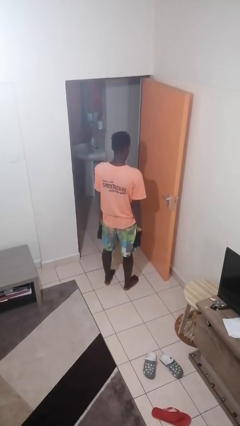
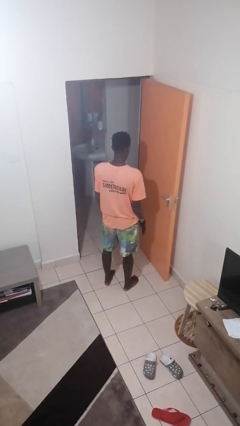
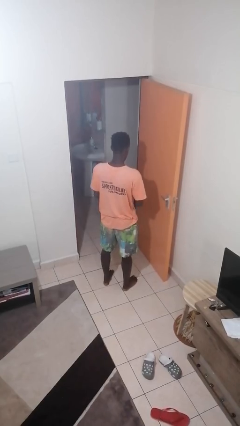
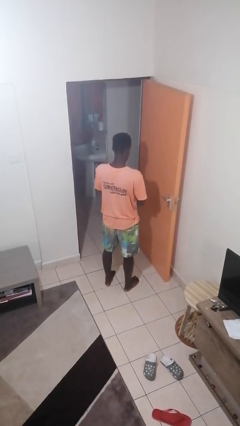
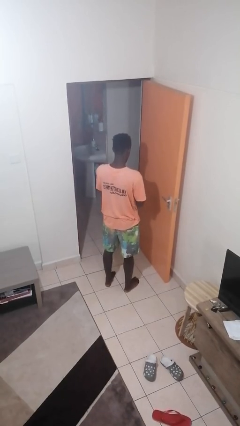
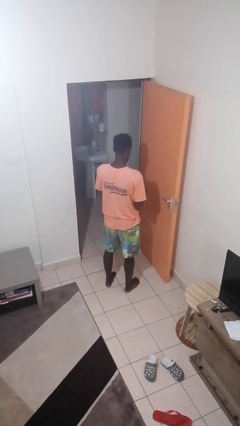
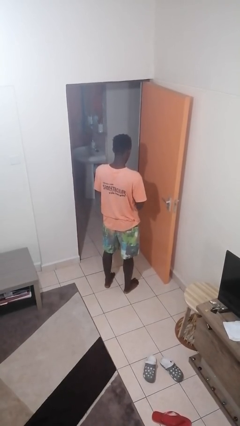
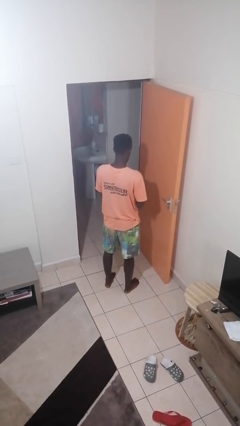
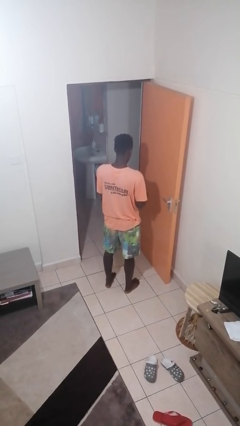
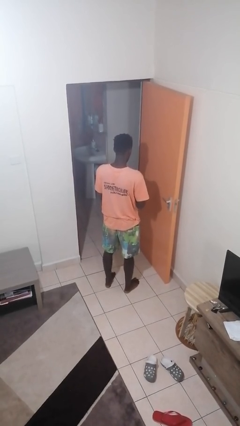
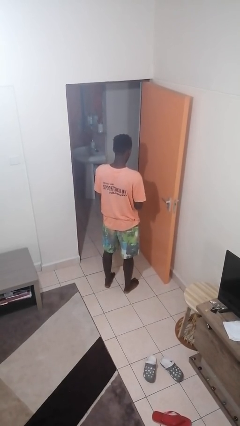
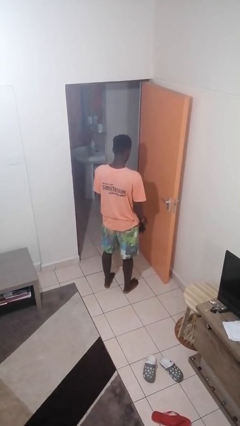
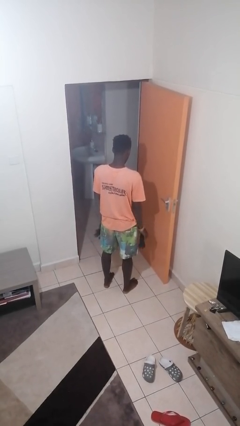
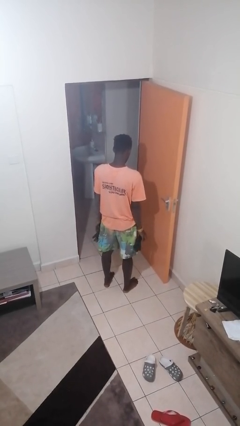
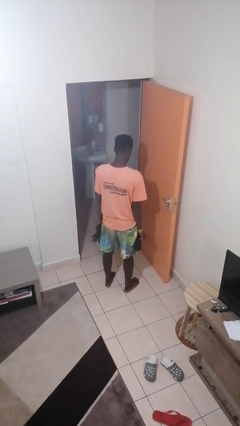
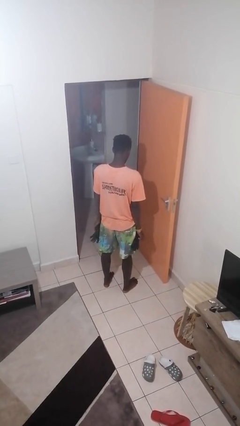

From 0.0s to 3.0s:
person takes off gloves

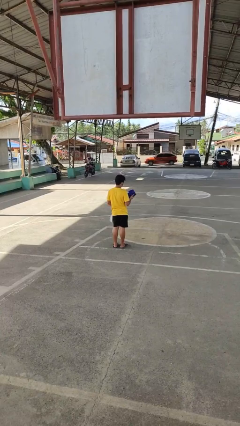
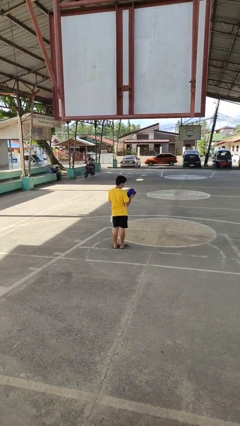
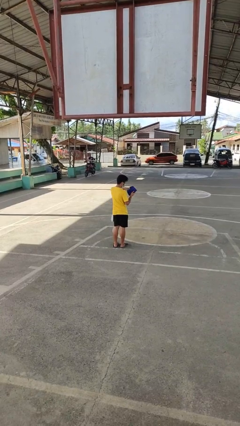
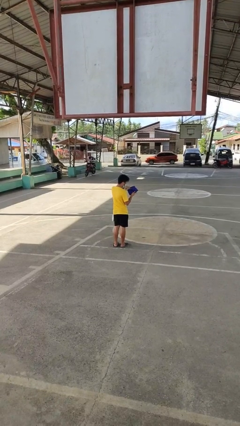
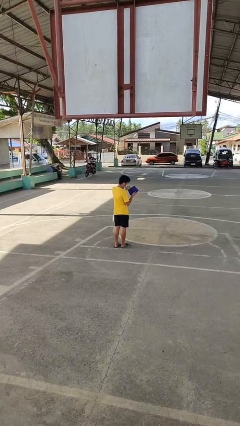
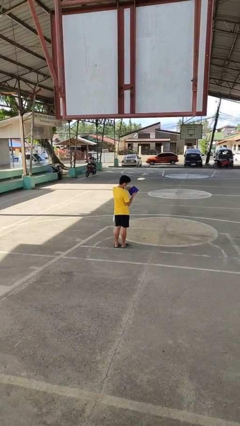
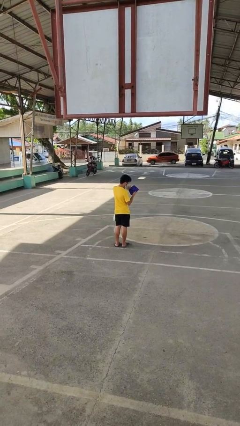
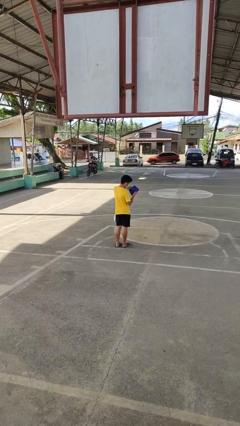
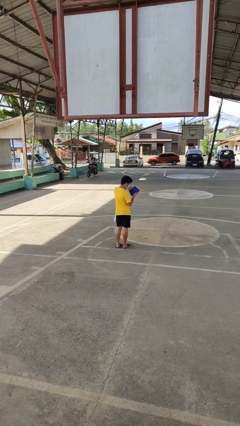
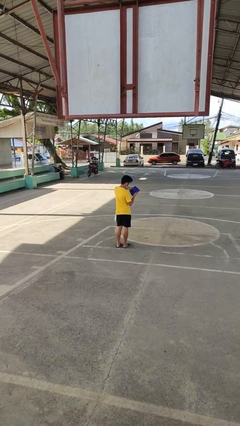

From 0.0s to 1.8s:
person searches in purse

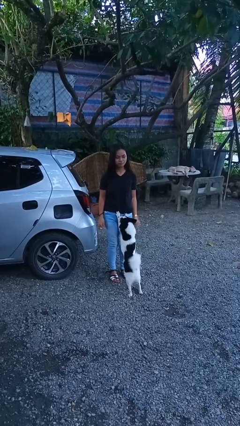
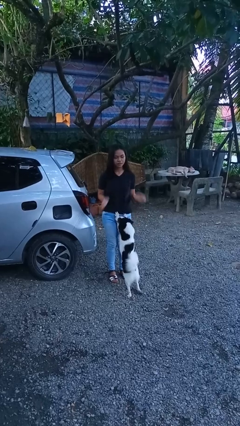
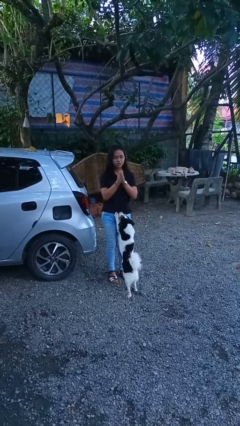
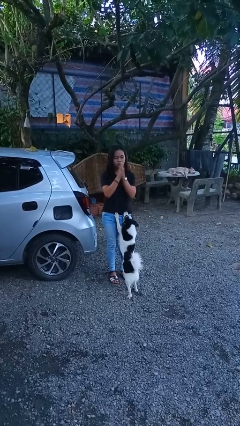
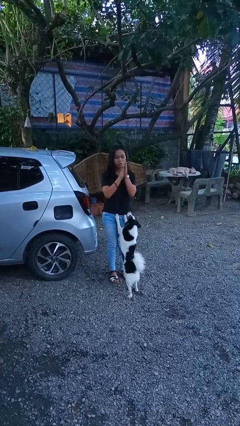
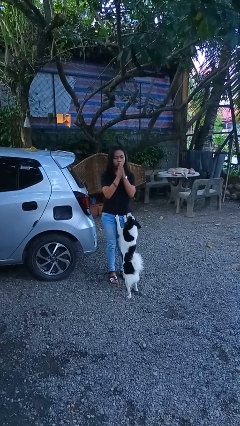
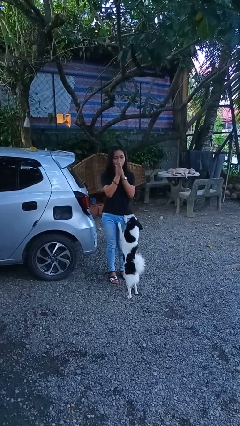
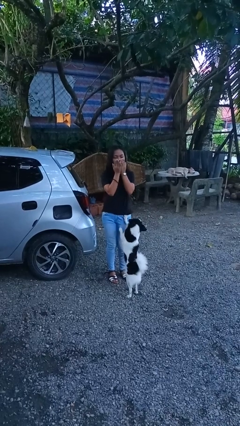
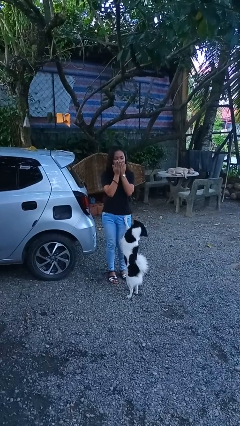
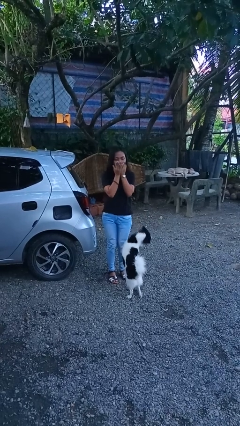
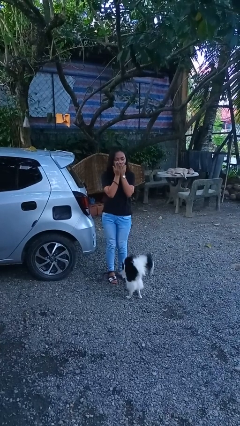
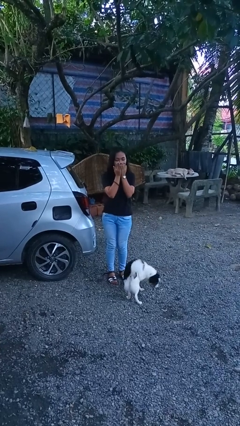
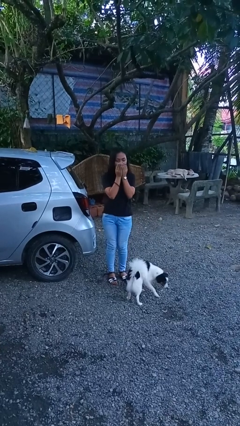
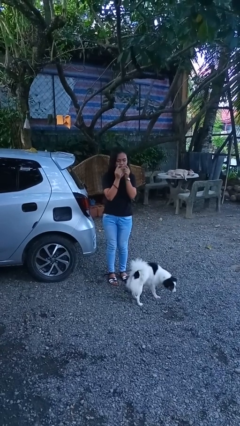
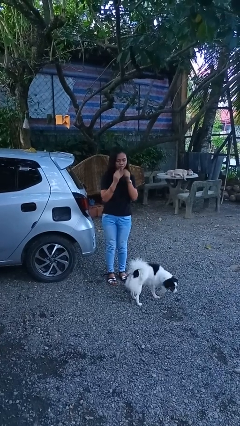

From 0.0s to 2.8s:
person blows into hands

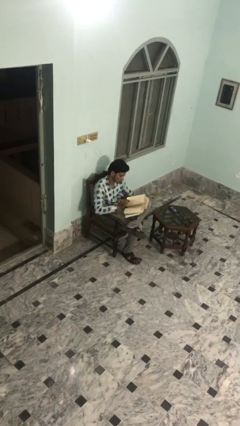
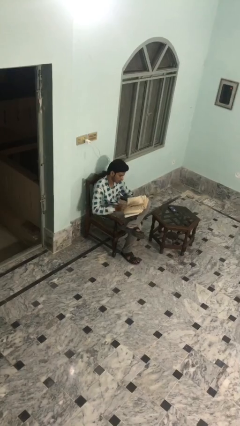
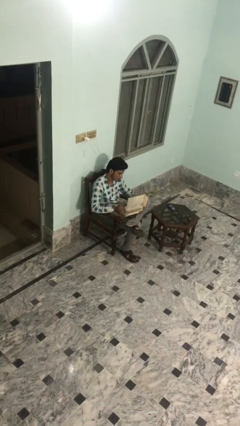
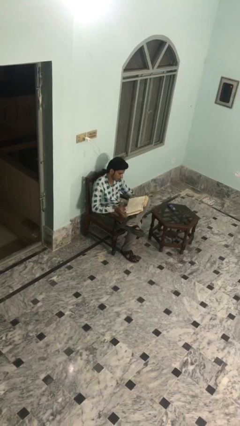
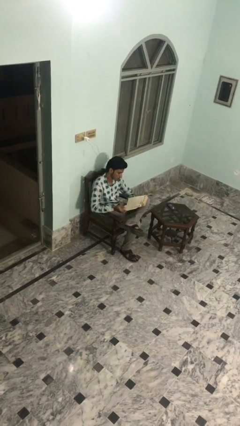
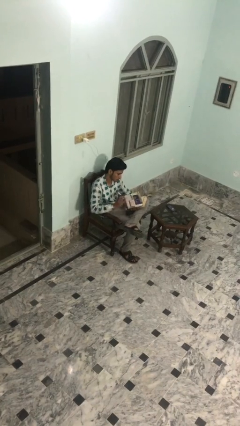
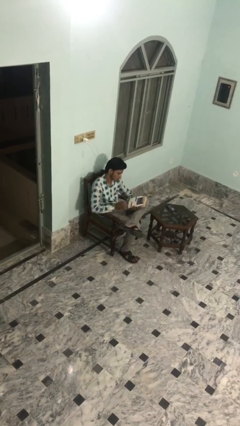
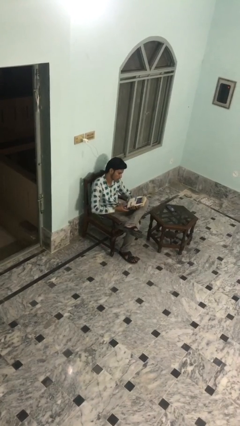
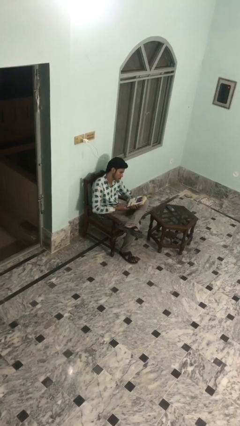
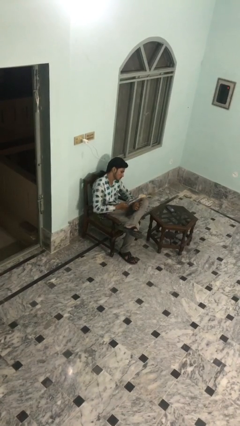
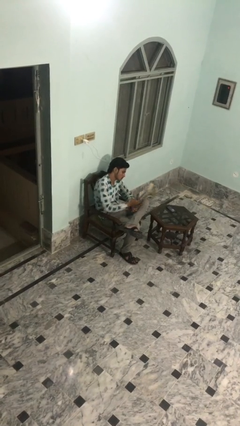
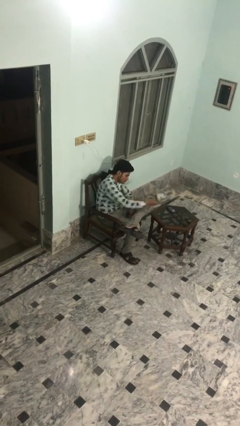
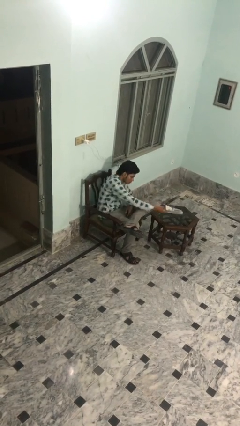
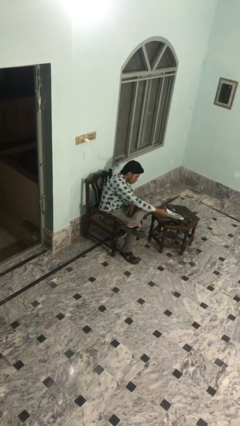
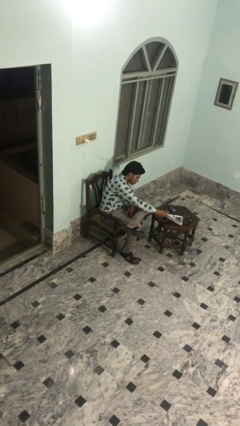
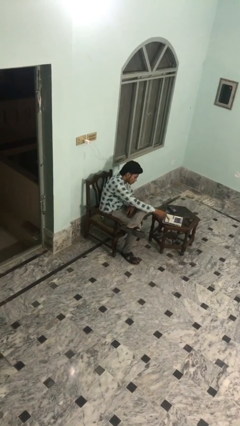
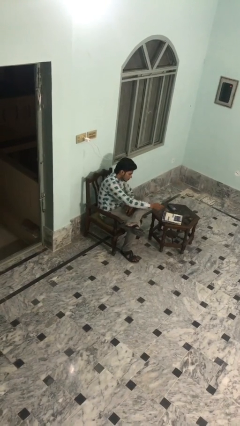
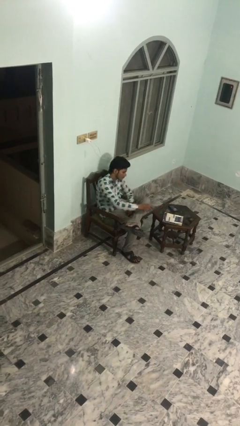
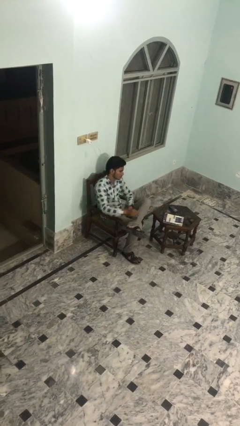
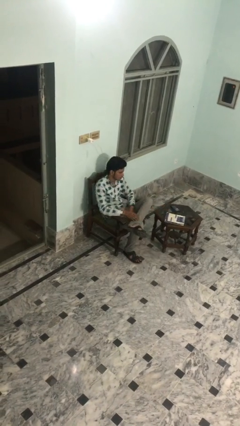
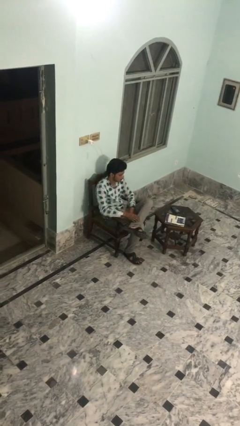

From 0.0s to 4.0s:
person puts down object on table

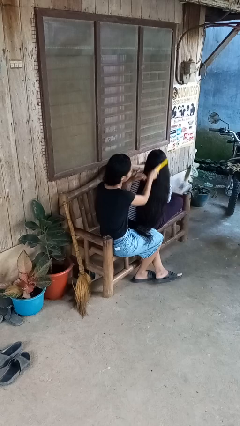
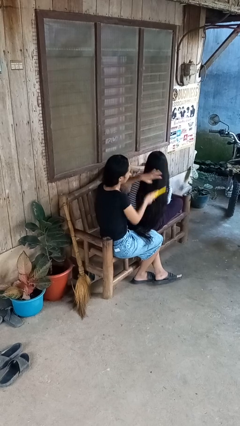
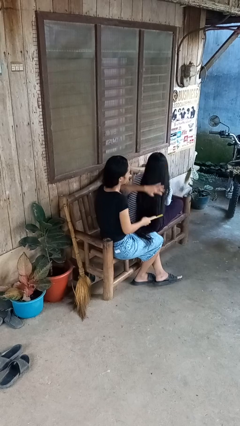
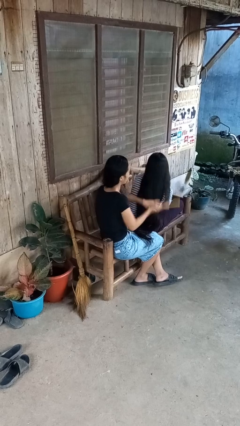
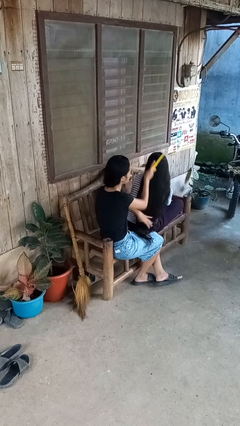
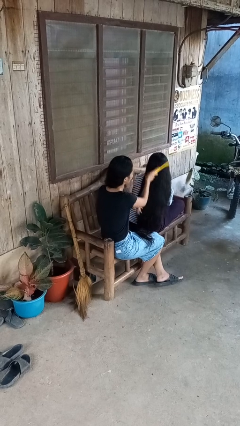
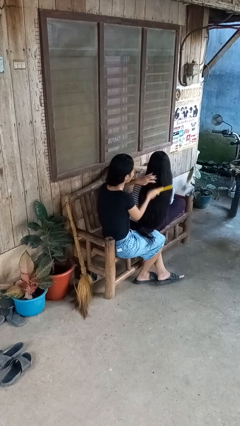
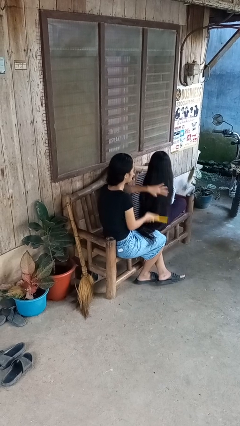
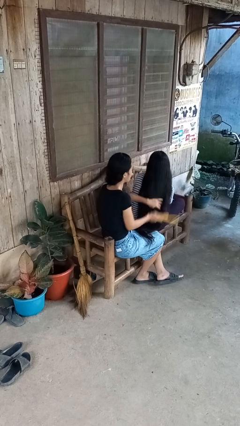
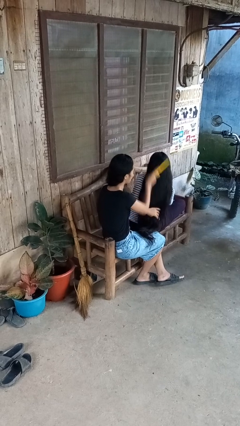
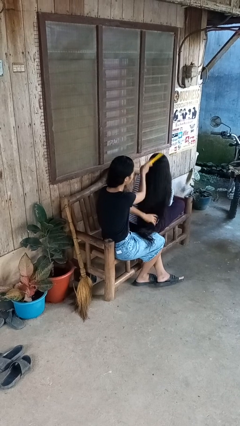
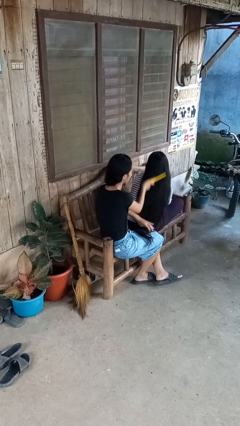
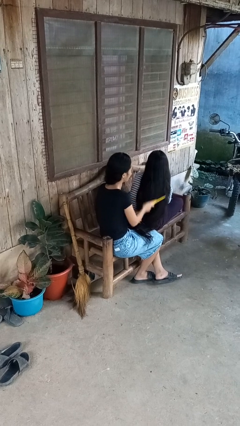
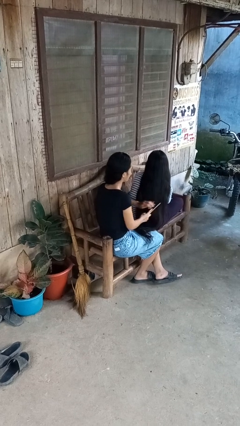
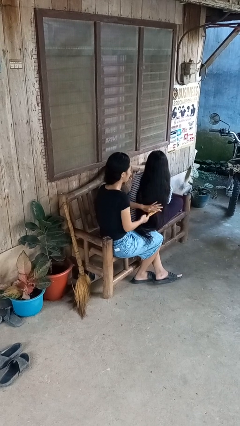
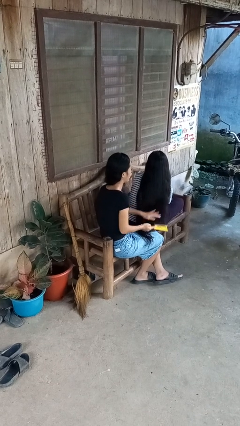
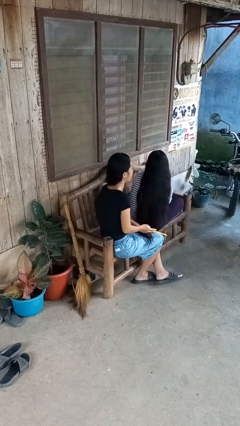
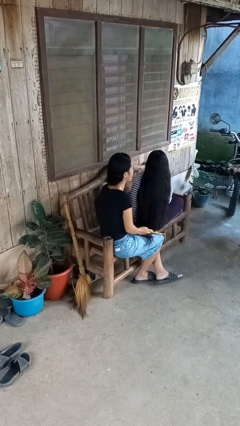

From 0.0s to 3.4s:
person brushes hair of person

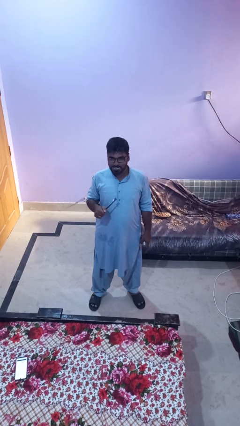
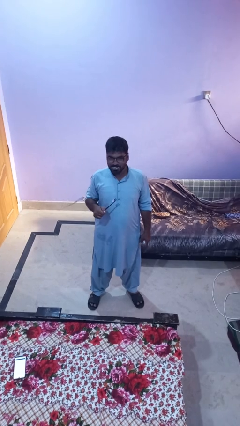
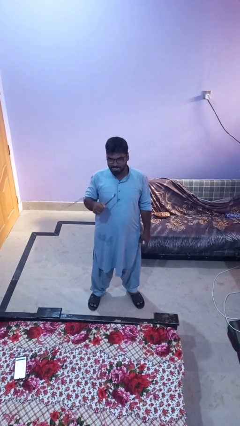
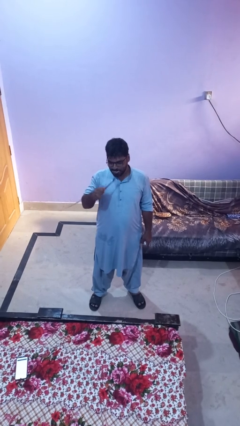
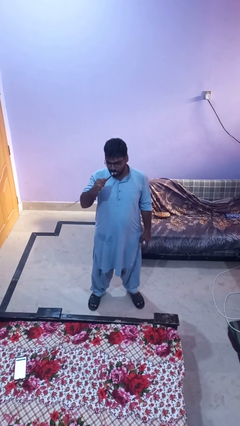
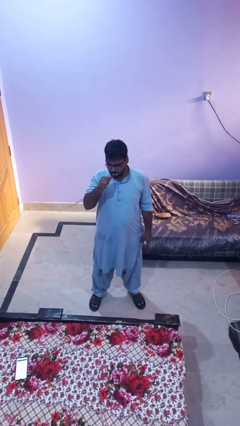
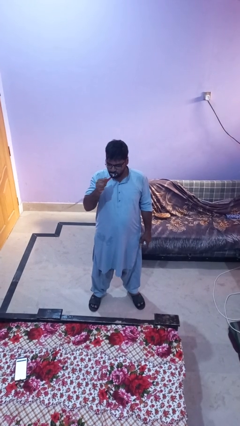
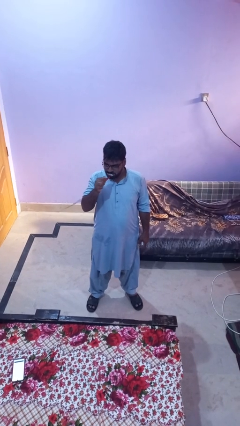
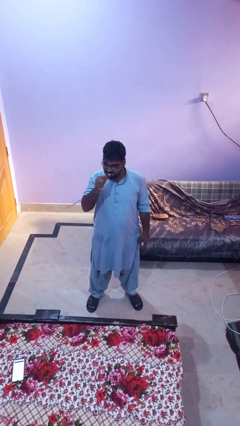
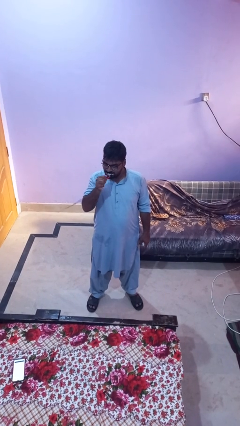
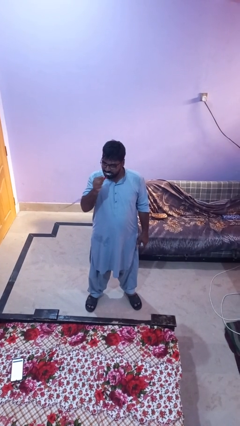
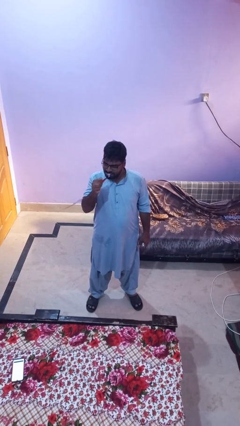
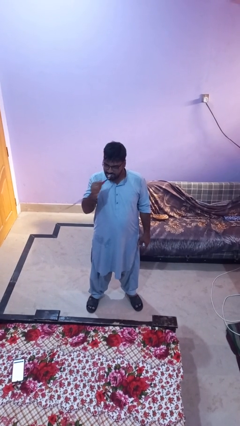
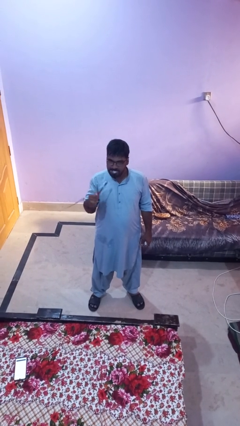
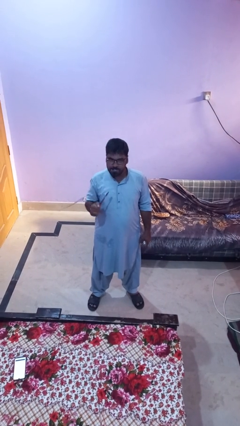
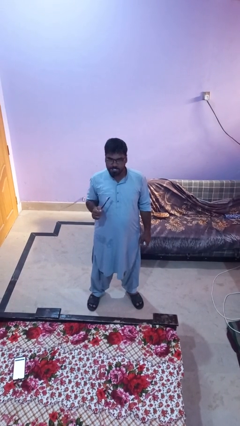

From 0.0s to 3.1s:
person brushes teeth
